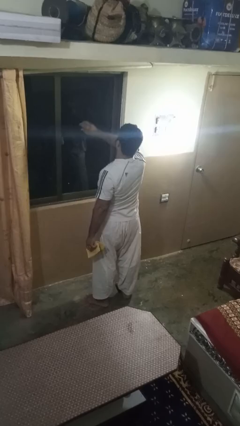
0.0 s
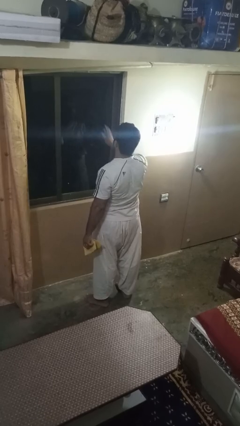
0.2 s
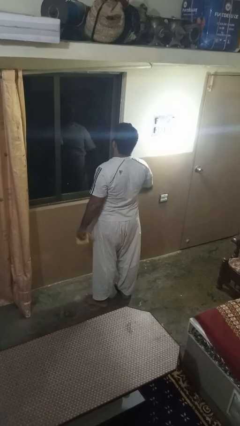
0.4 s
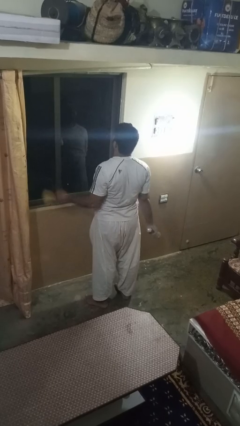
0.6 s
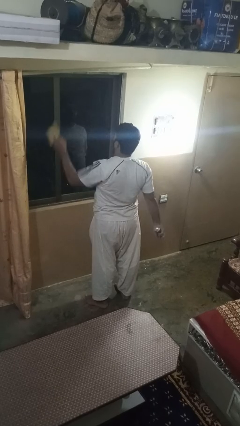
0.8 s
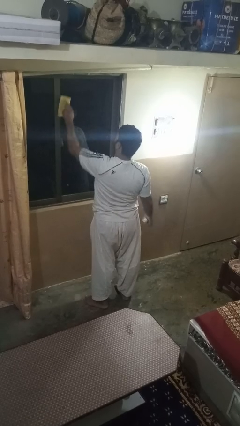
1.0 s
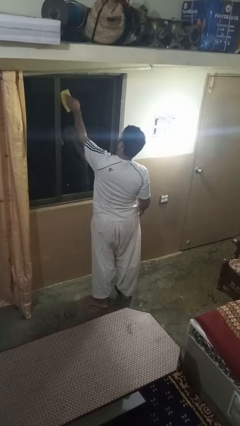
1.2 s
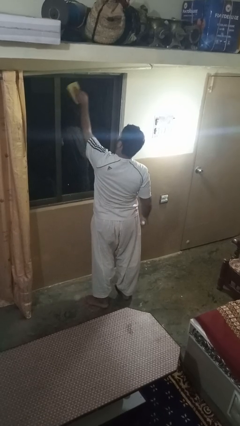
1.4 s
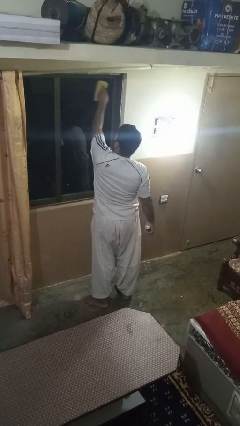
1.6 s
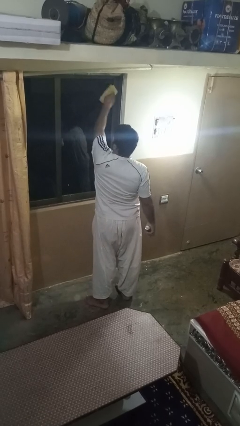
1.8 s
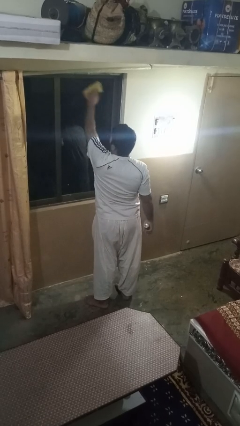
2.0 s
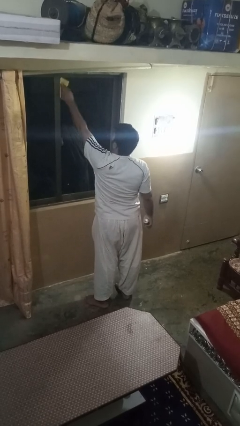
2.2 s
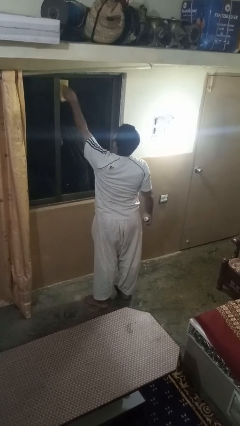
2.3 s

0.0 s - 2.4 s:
person washes window

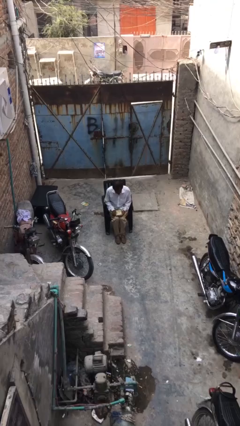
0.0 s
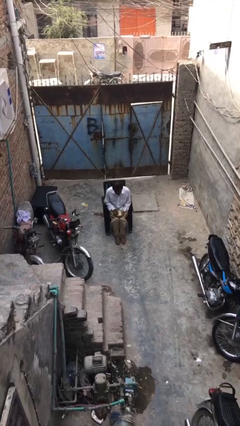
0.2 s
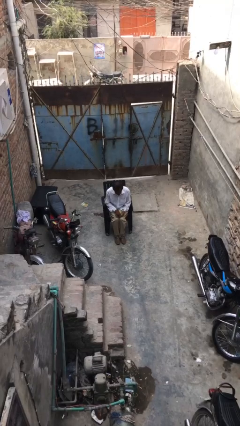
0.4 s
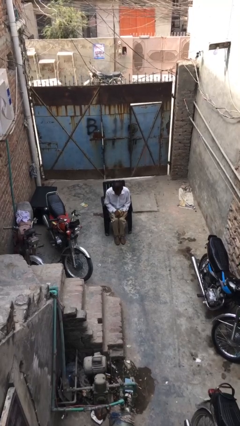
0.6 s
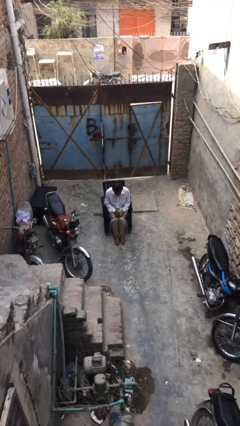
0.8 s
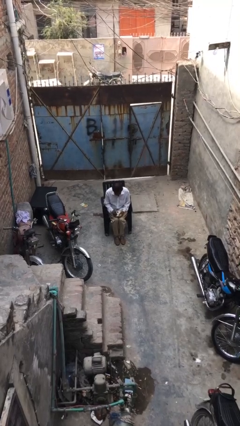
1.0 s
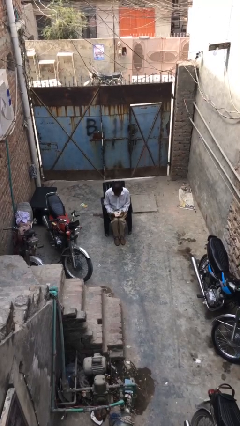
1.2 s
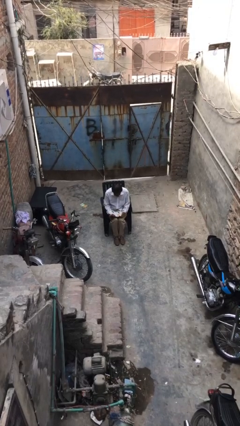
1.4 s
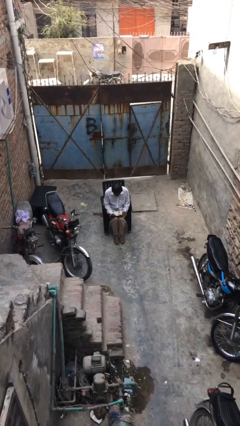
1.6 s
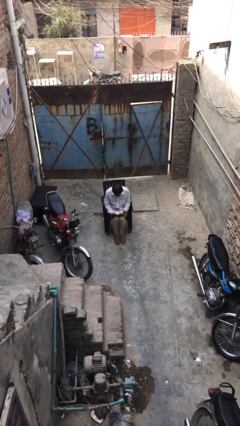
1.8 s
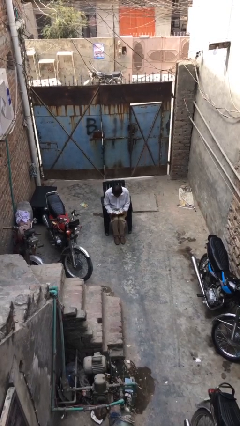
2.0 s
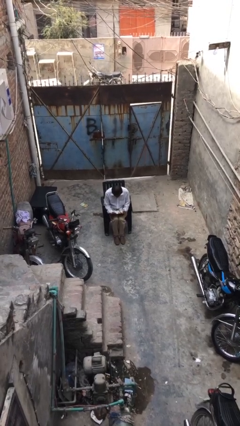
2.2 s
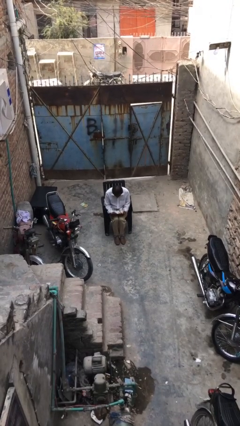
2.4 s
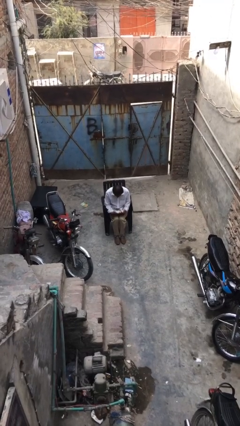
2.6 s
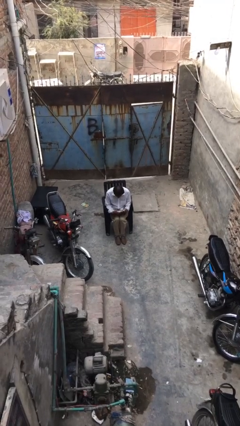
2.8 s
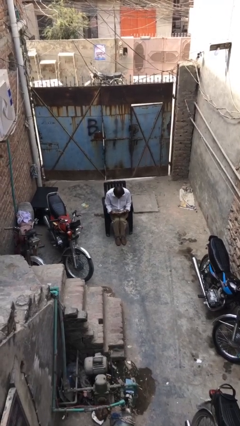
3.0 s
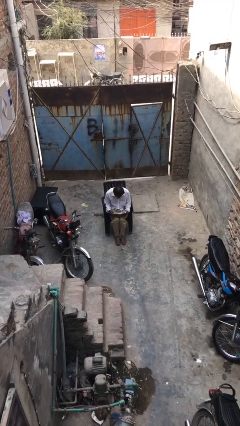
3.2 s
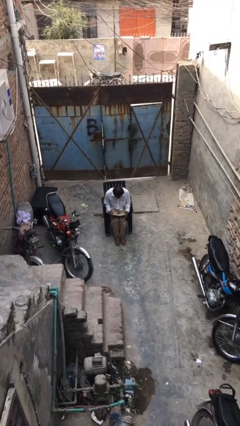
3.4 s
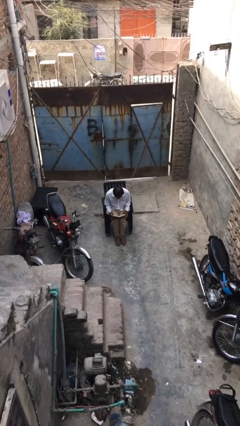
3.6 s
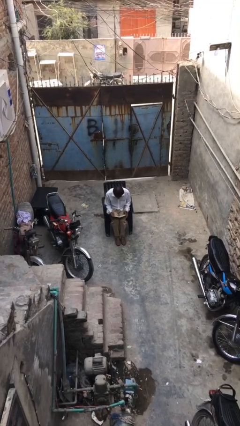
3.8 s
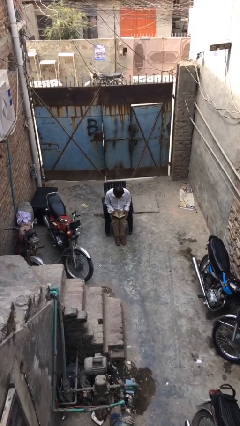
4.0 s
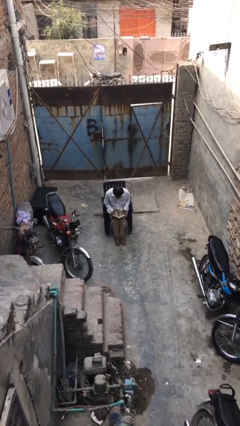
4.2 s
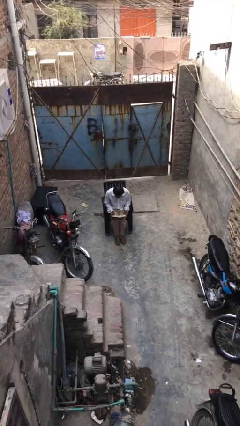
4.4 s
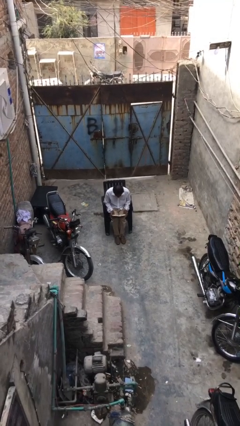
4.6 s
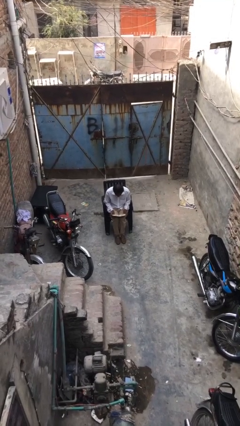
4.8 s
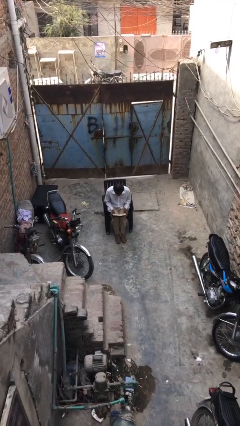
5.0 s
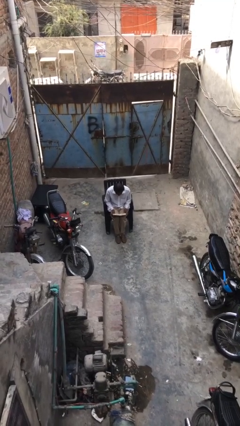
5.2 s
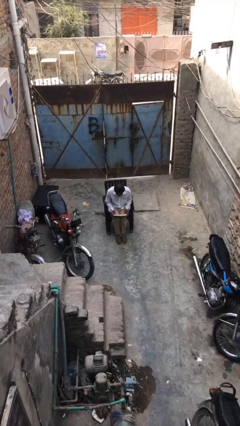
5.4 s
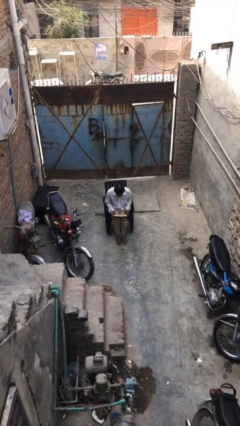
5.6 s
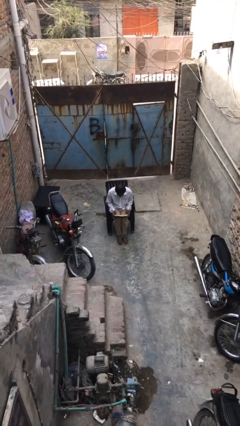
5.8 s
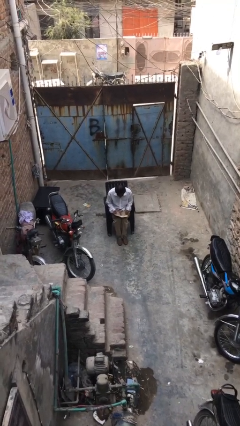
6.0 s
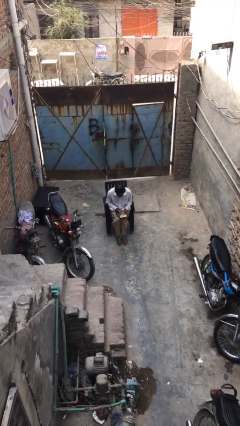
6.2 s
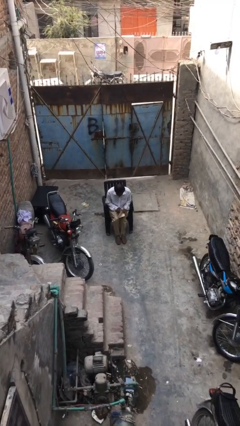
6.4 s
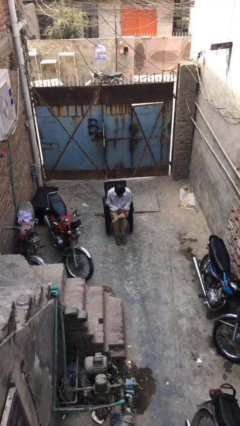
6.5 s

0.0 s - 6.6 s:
person reads document

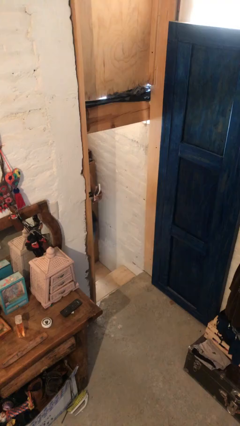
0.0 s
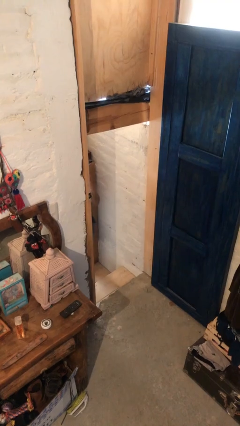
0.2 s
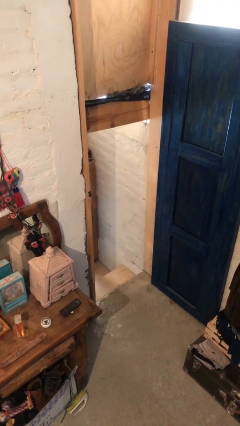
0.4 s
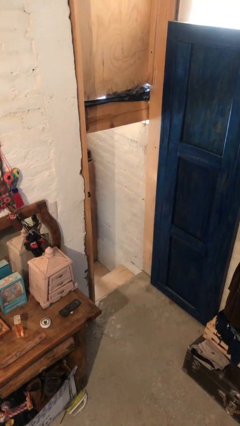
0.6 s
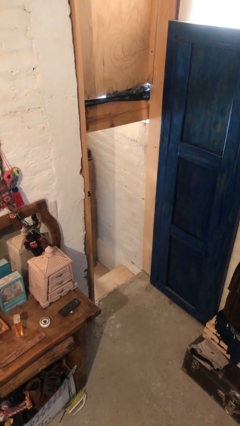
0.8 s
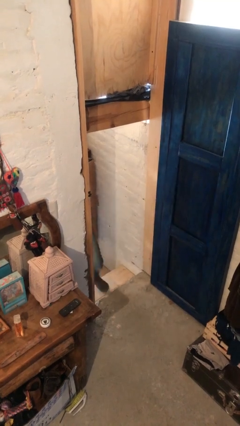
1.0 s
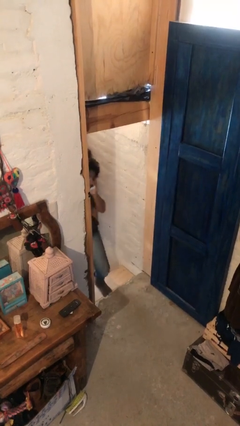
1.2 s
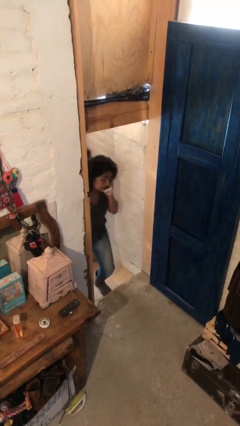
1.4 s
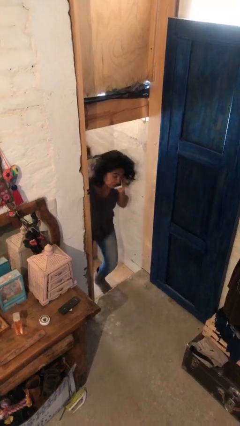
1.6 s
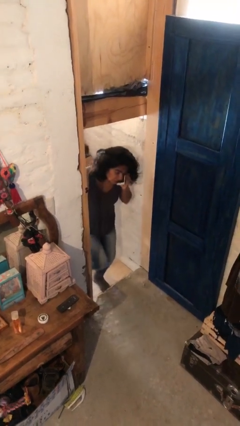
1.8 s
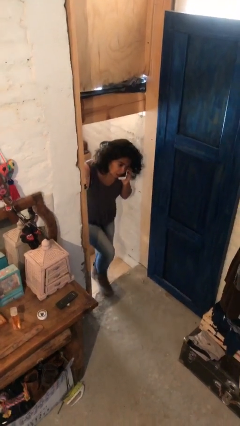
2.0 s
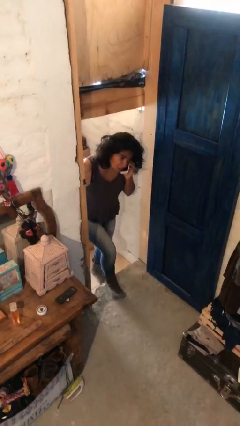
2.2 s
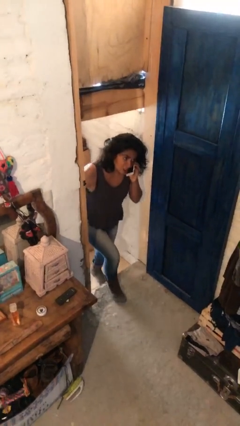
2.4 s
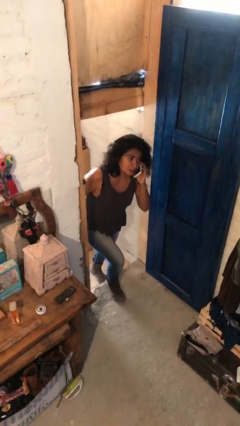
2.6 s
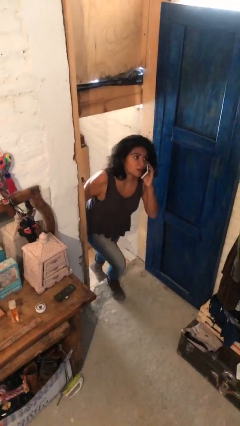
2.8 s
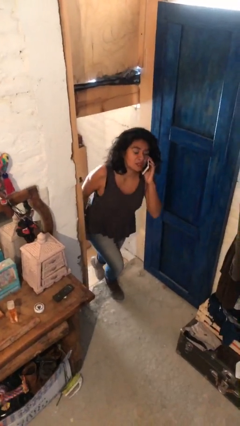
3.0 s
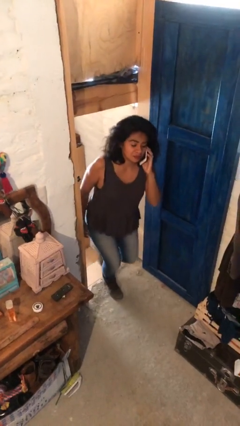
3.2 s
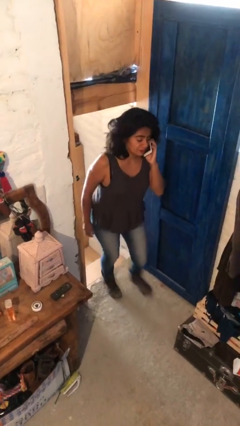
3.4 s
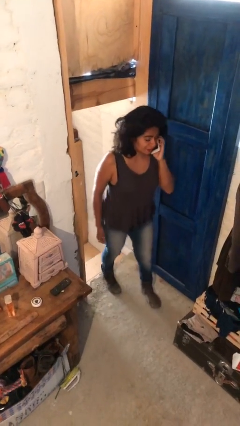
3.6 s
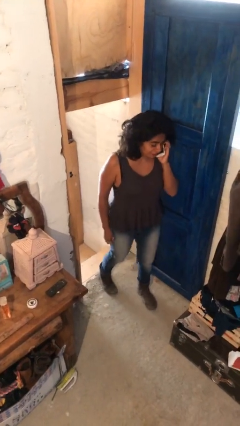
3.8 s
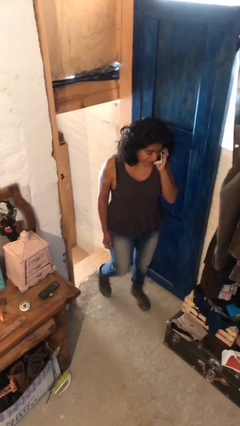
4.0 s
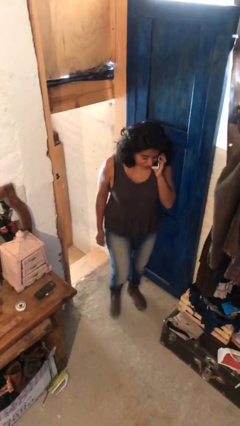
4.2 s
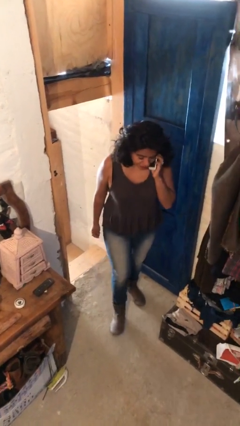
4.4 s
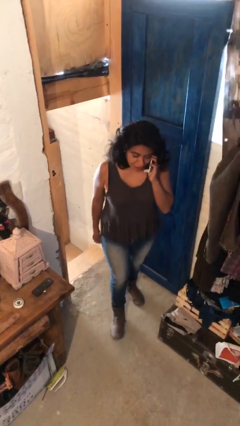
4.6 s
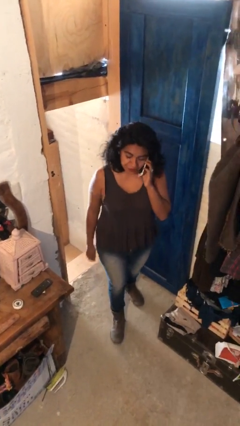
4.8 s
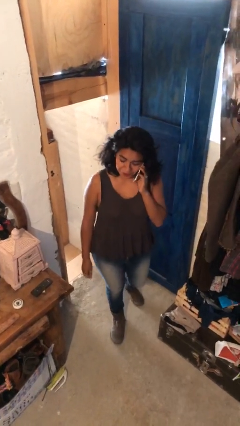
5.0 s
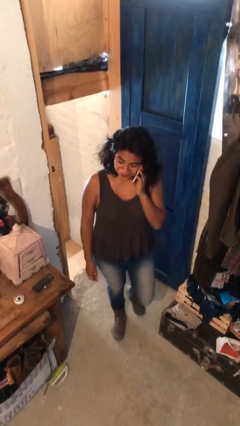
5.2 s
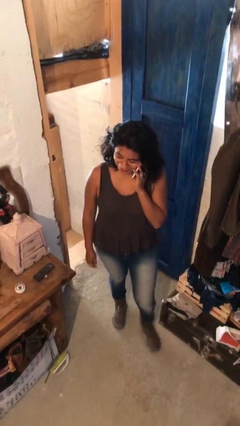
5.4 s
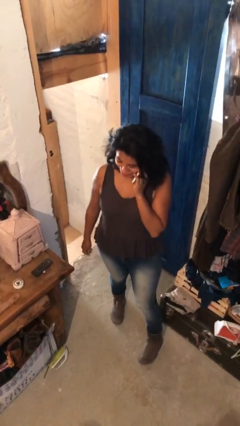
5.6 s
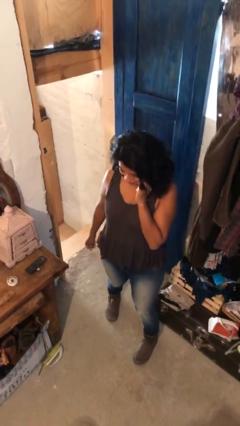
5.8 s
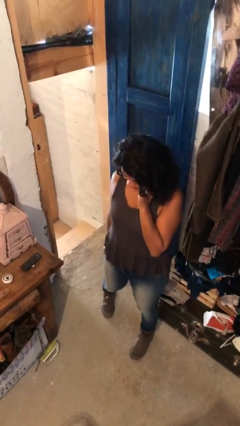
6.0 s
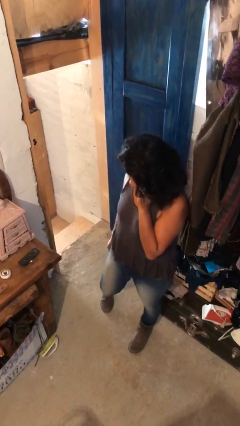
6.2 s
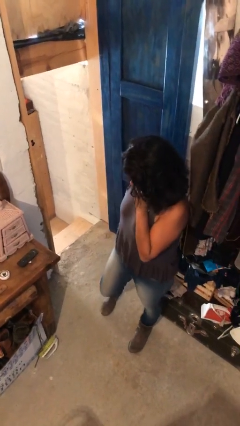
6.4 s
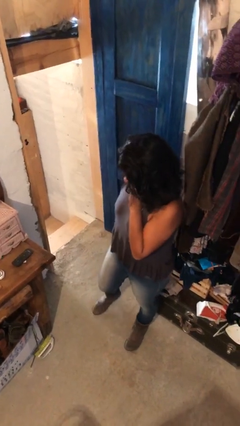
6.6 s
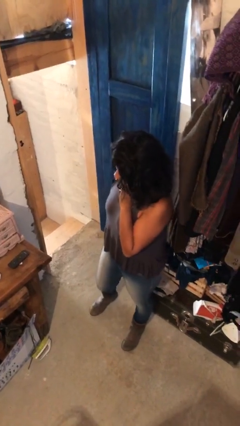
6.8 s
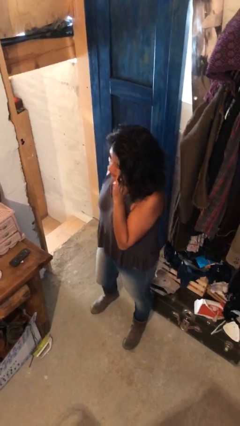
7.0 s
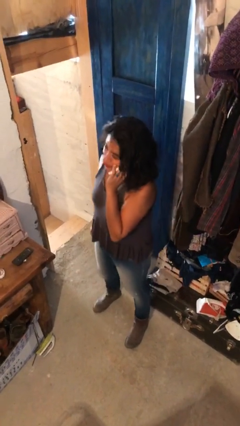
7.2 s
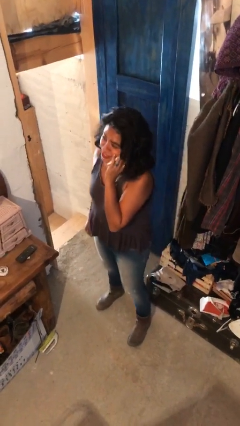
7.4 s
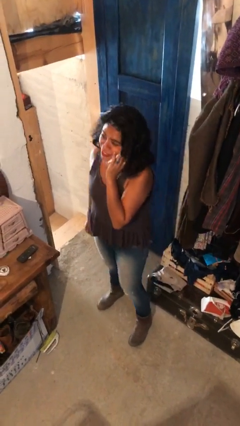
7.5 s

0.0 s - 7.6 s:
person enters scene through structure

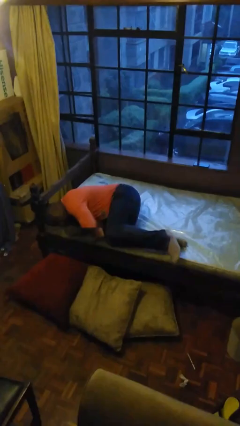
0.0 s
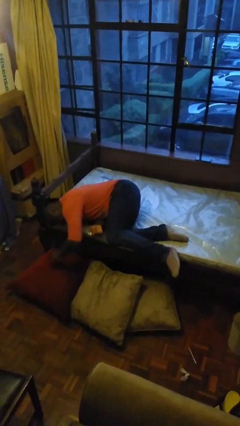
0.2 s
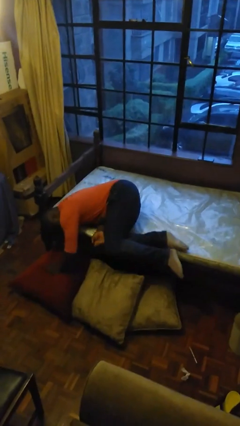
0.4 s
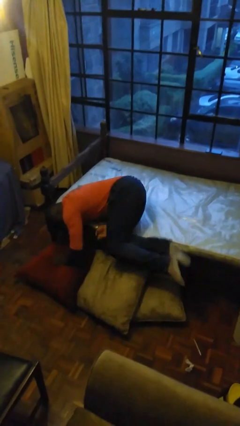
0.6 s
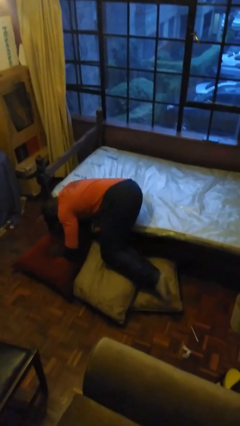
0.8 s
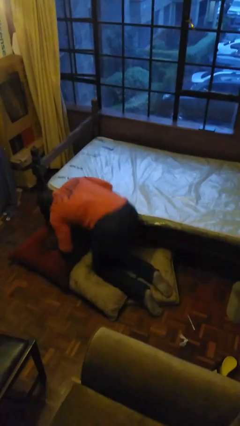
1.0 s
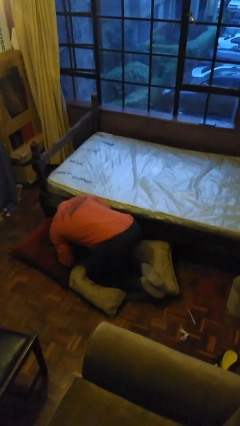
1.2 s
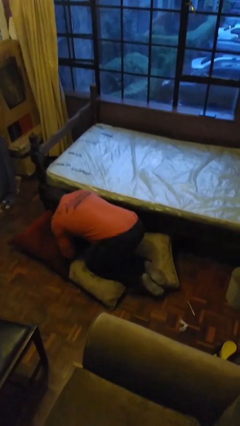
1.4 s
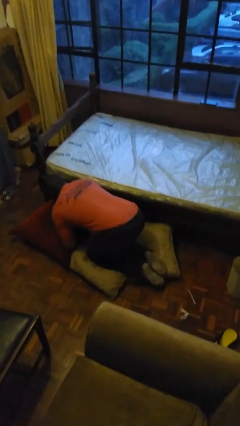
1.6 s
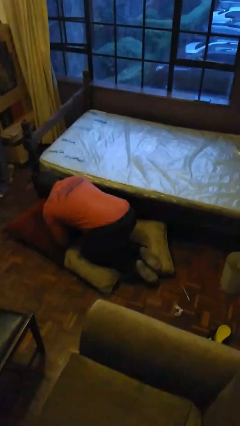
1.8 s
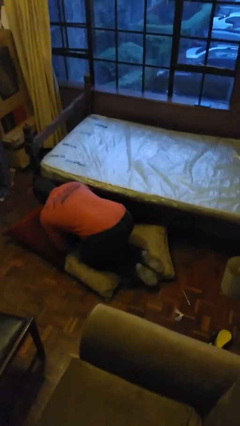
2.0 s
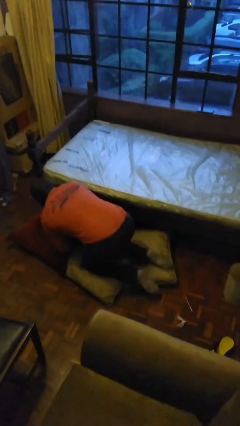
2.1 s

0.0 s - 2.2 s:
person falls from bed
